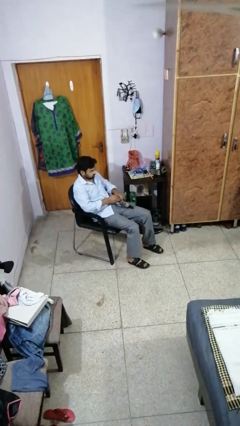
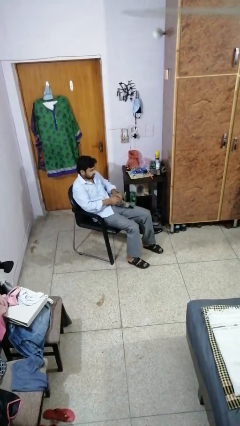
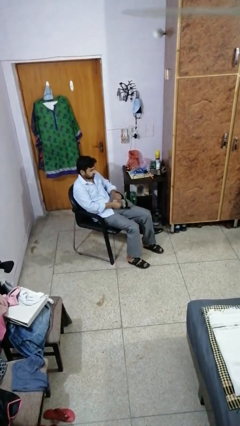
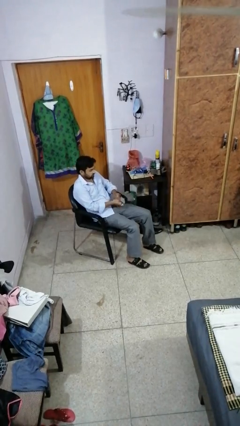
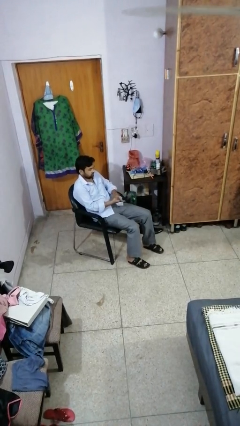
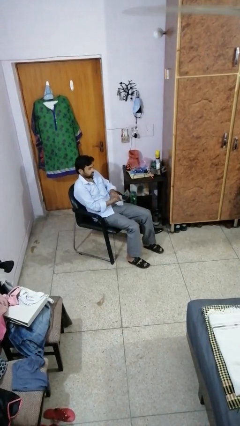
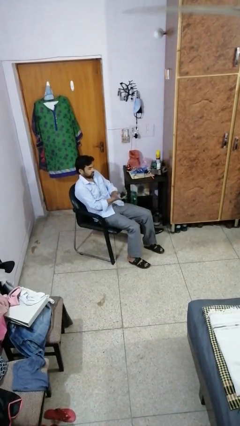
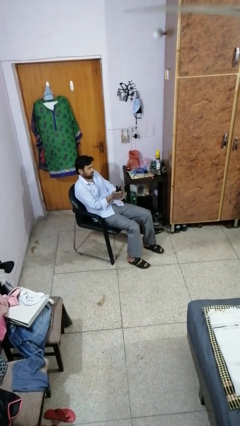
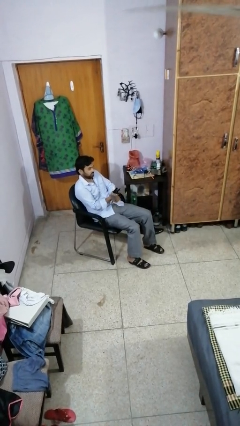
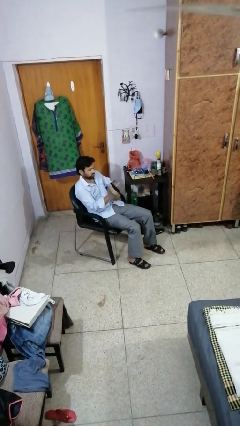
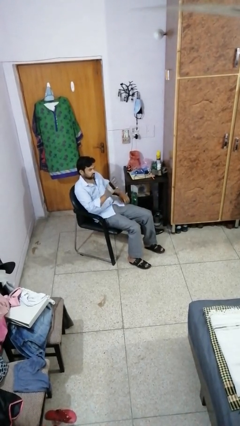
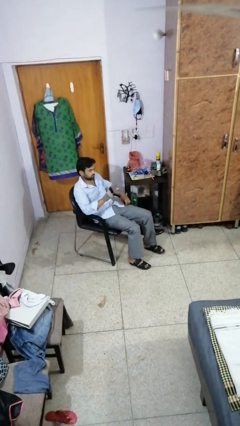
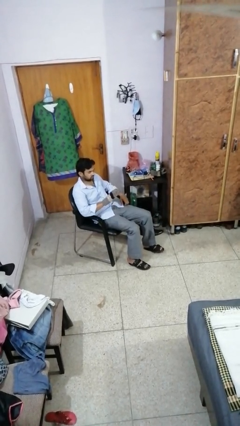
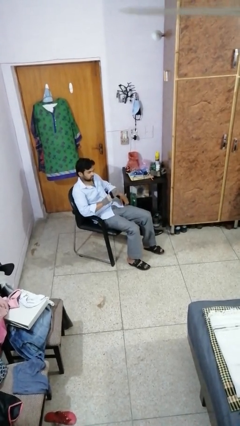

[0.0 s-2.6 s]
person puts on gloves

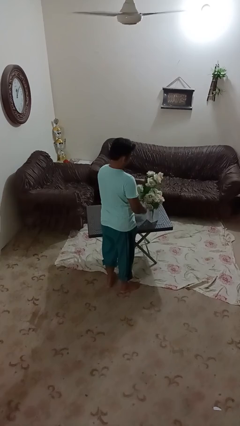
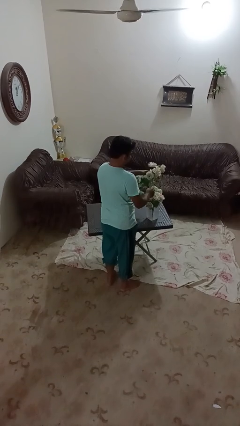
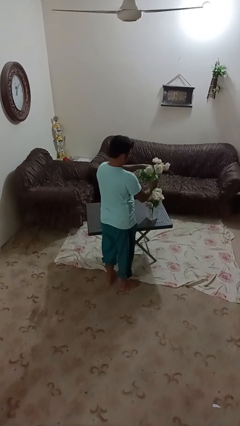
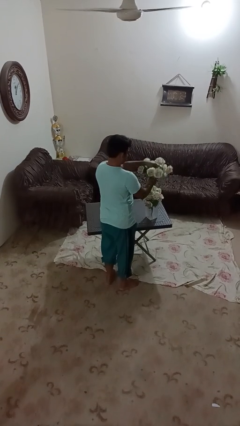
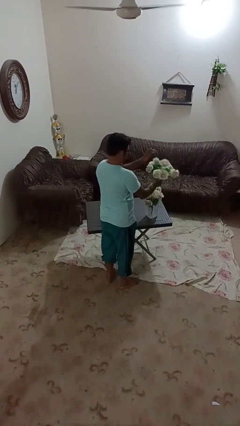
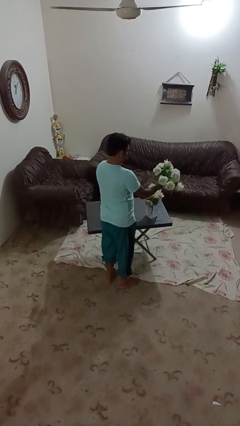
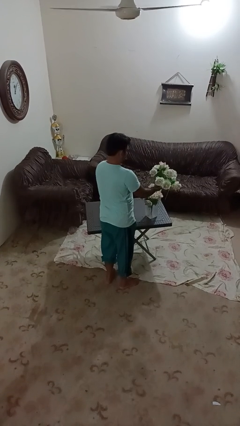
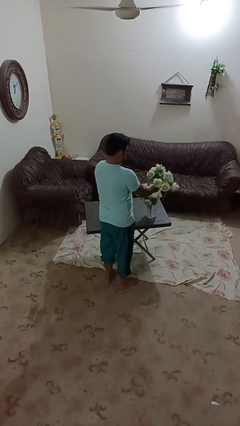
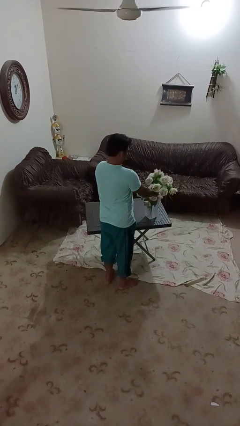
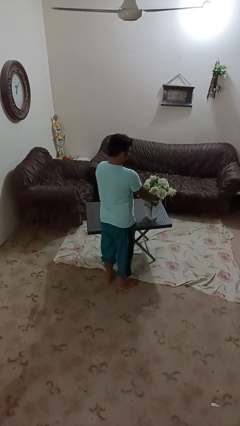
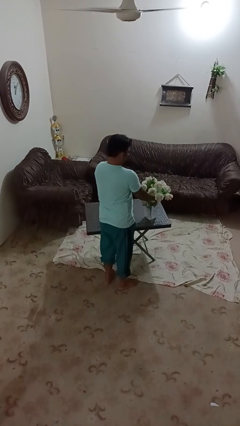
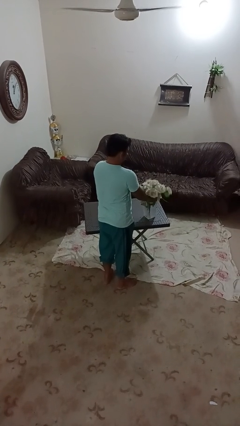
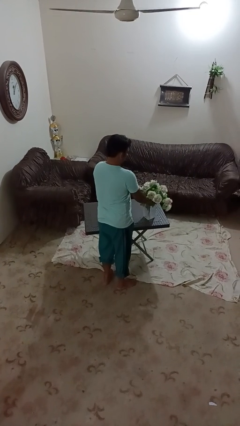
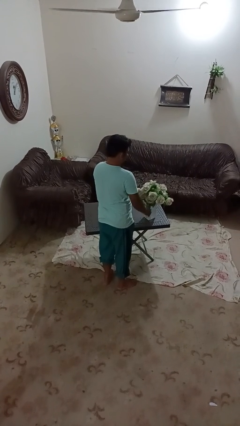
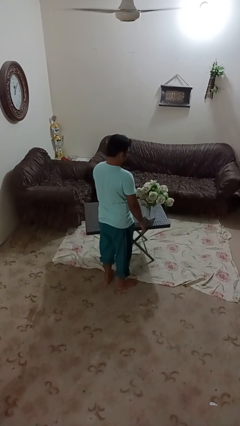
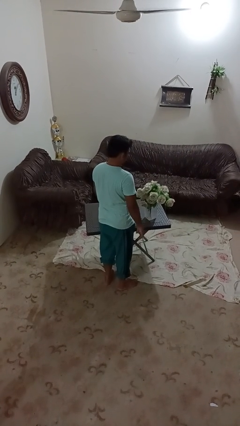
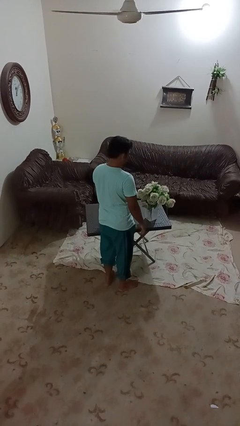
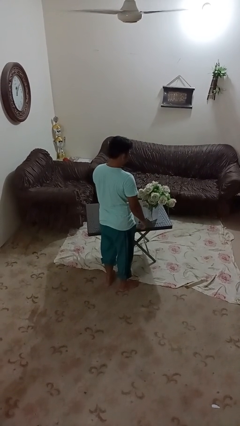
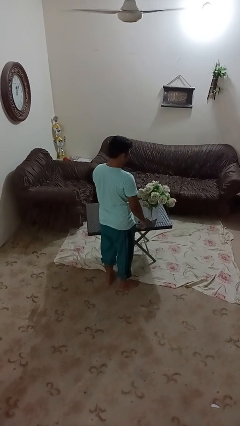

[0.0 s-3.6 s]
person arranges flowers in vase

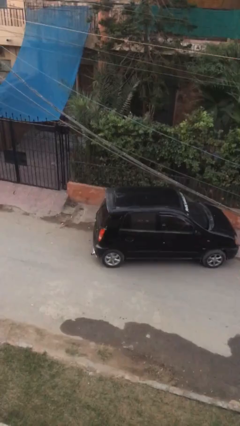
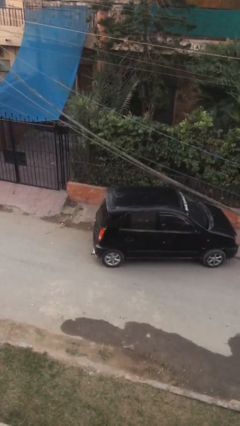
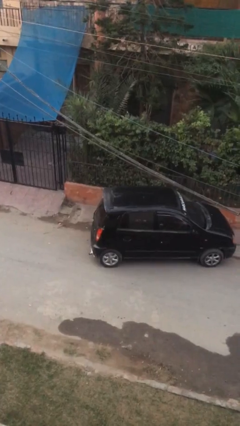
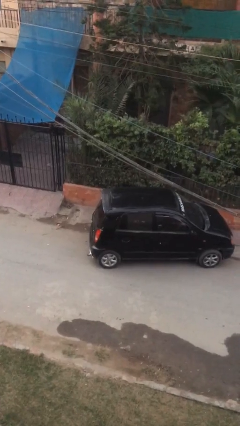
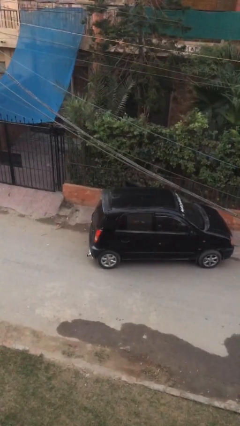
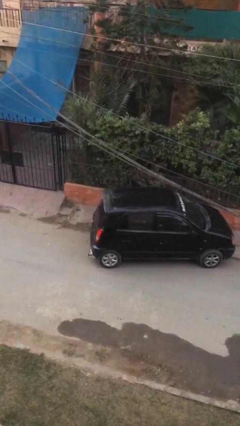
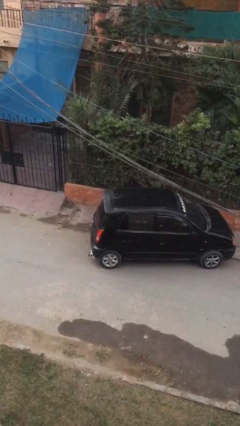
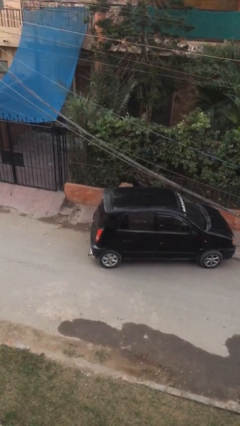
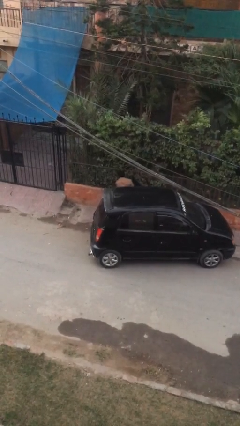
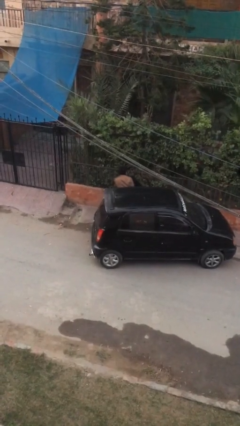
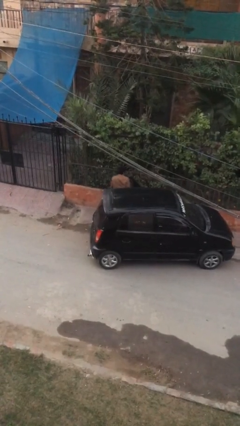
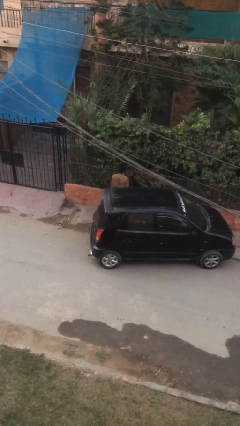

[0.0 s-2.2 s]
person exits car

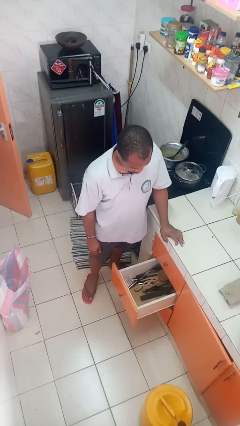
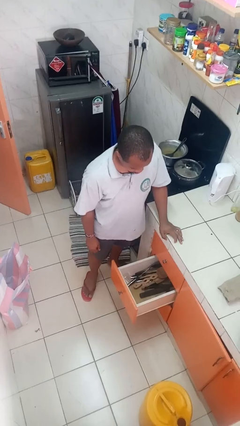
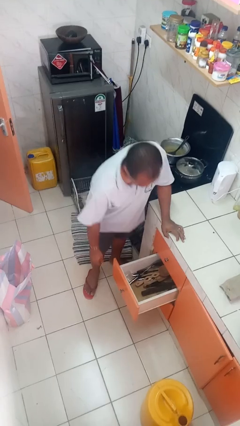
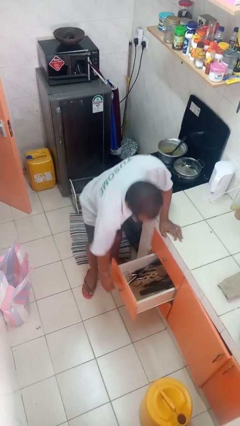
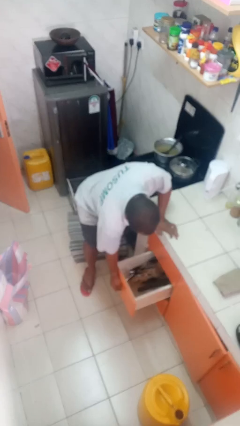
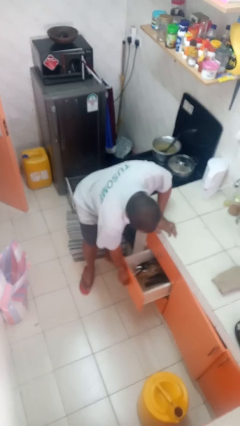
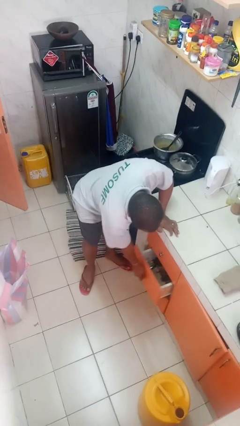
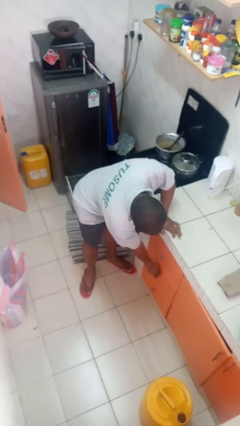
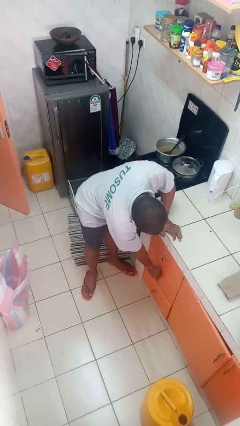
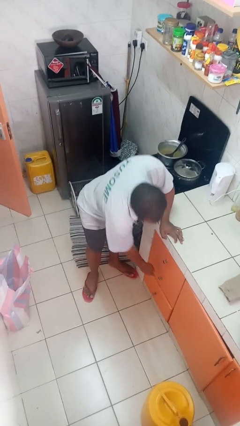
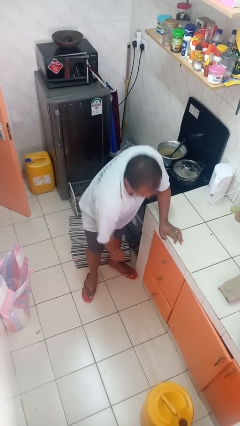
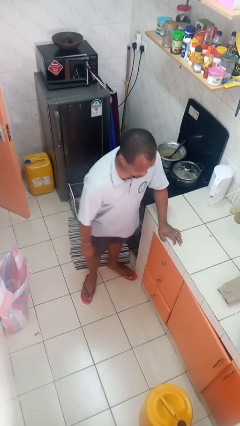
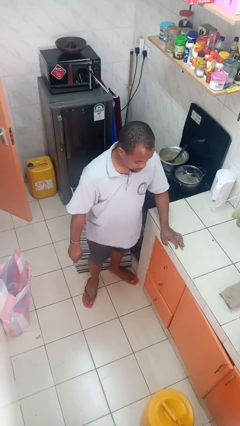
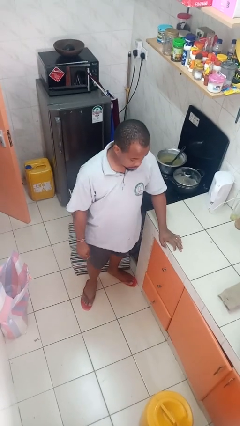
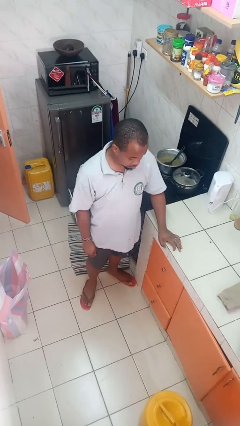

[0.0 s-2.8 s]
person closes kitchen drawer

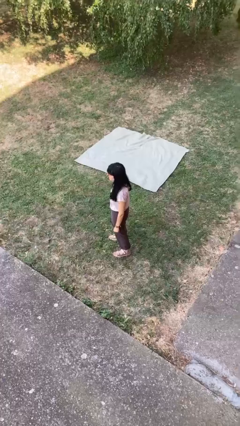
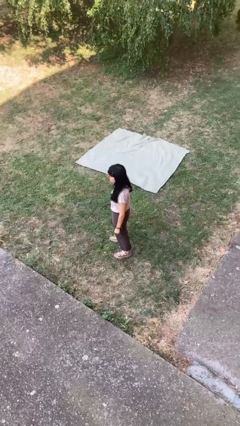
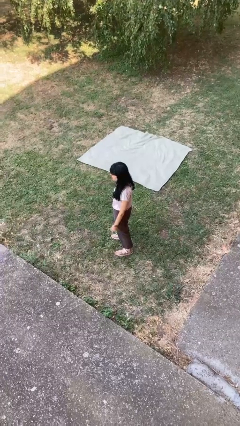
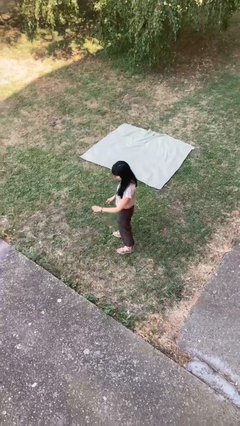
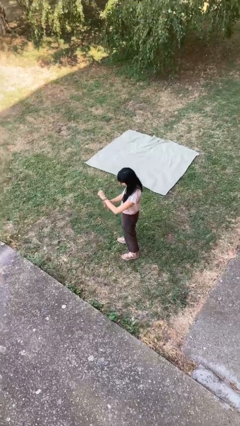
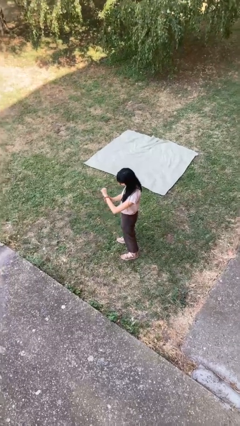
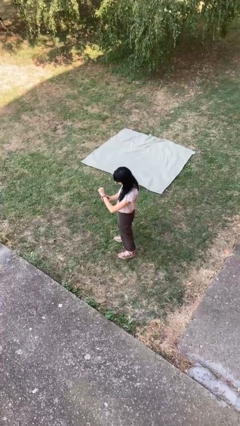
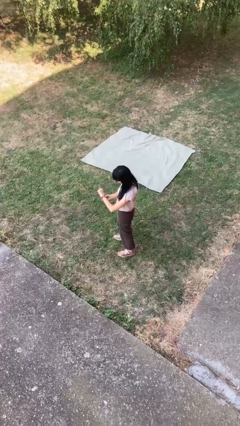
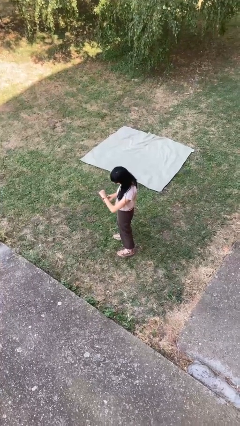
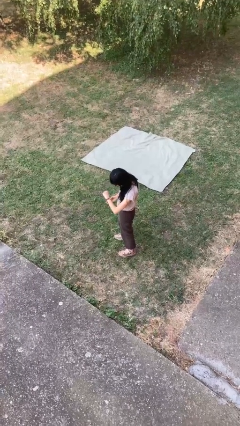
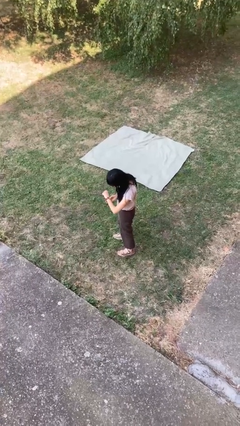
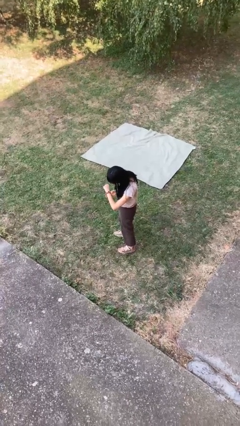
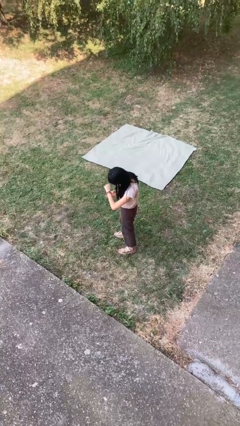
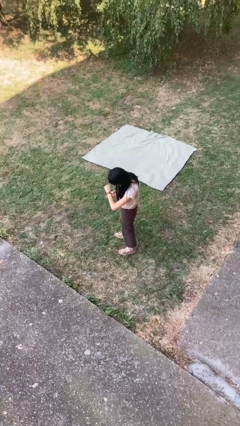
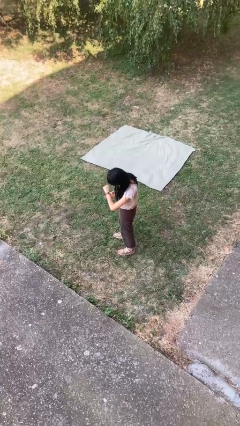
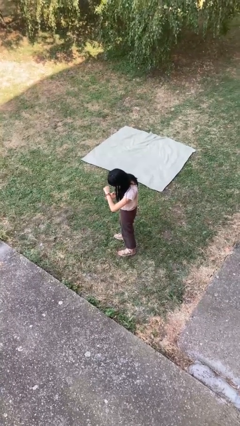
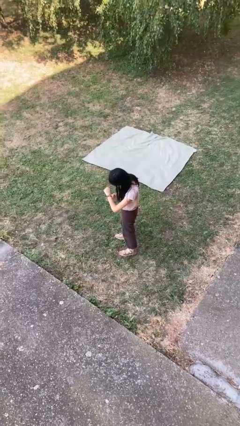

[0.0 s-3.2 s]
person looks at wristwatch

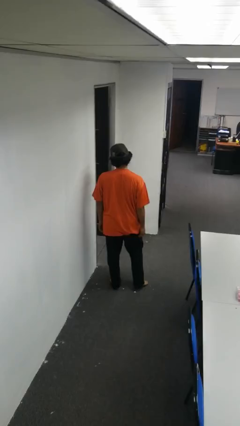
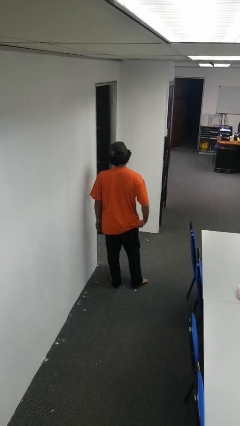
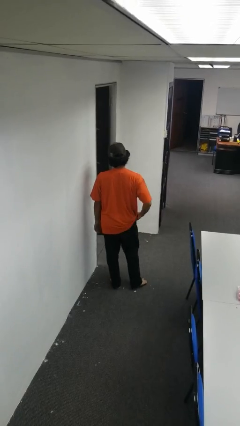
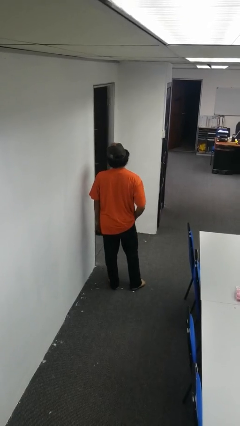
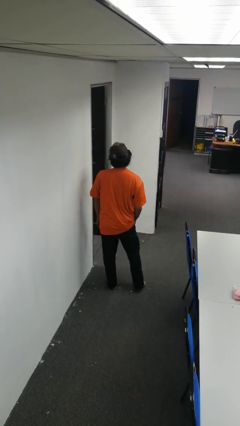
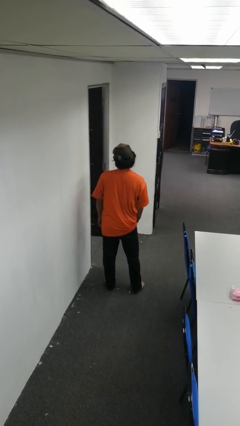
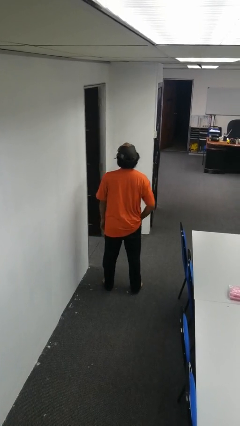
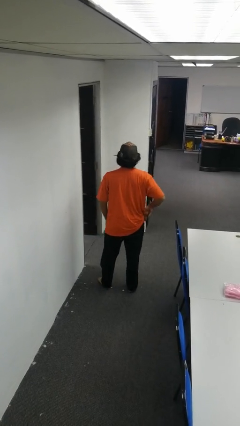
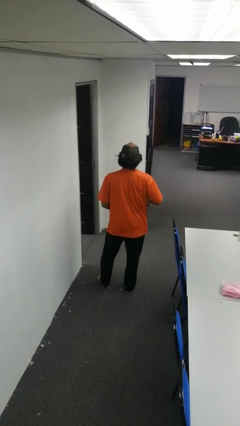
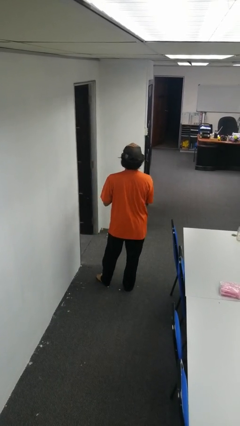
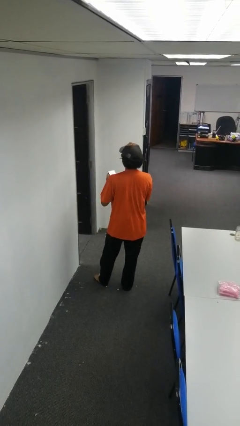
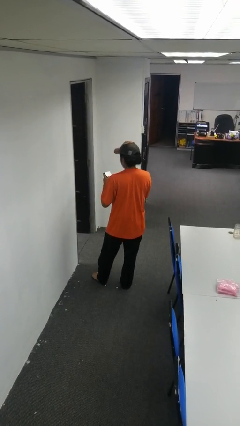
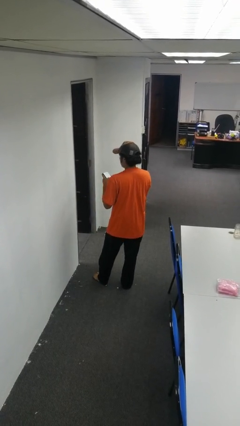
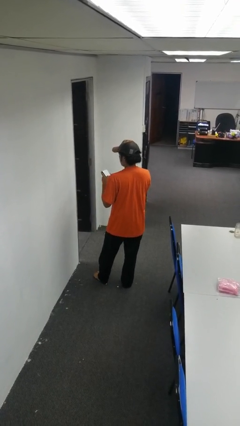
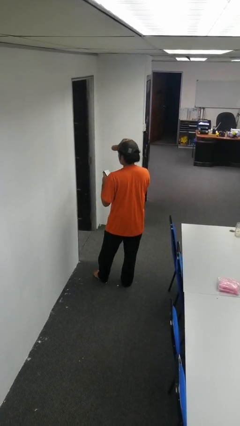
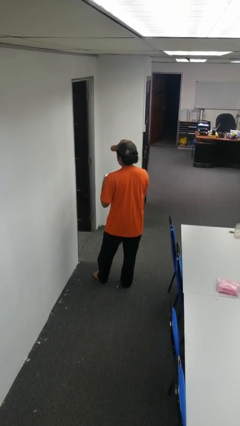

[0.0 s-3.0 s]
person takes phone from pocket
